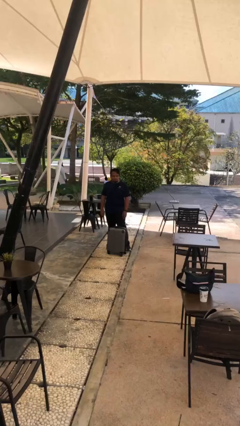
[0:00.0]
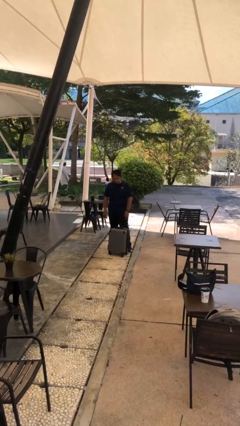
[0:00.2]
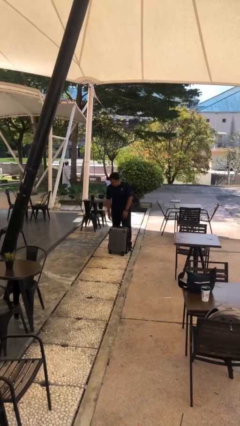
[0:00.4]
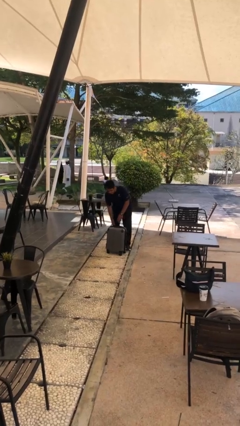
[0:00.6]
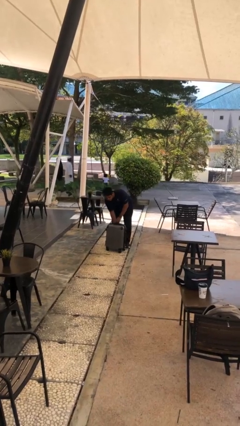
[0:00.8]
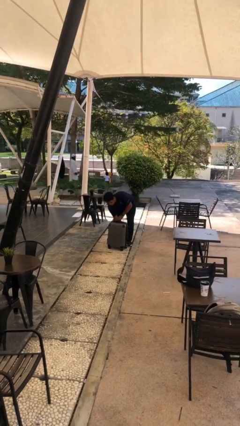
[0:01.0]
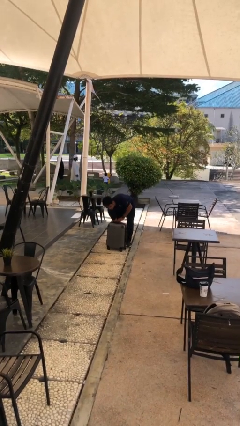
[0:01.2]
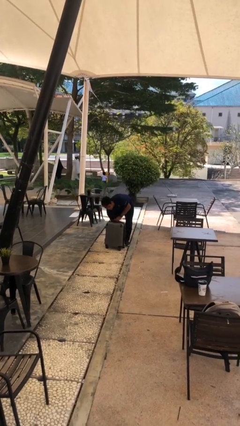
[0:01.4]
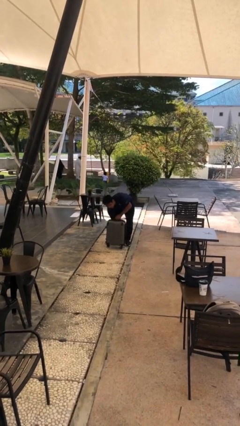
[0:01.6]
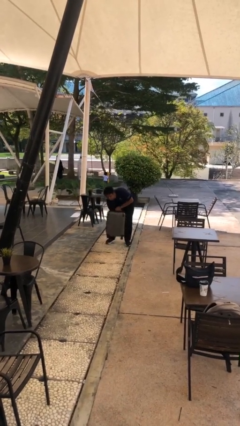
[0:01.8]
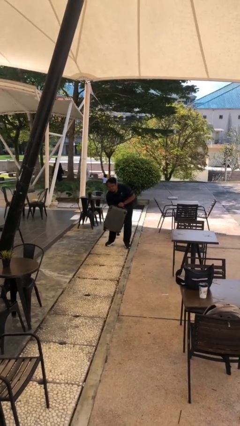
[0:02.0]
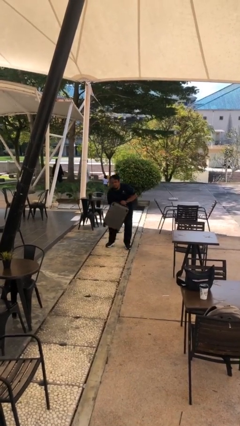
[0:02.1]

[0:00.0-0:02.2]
person picks up object from floor

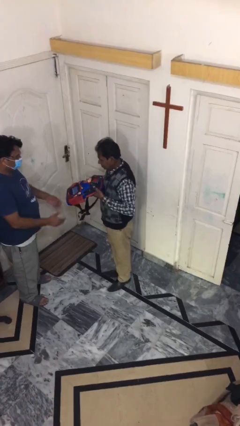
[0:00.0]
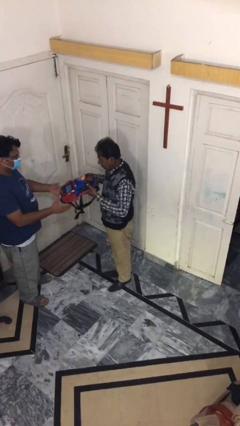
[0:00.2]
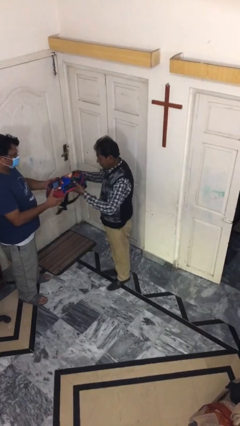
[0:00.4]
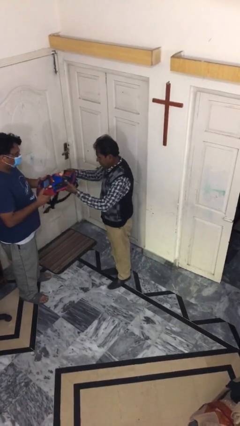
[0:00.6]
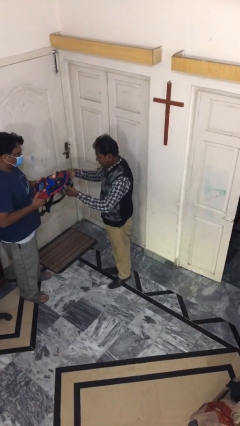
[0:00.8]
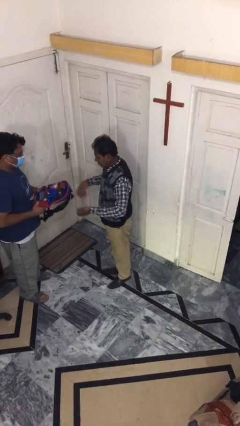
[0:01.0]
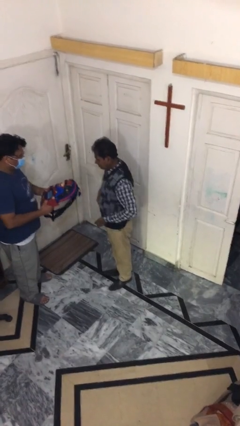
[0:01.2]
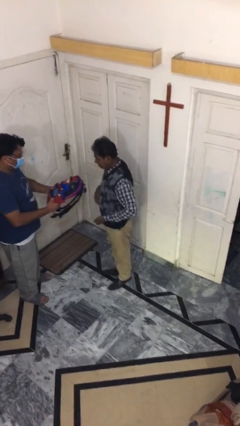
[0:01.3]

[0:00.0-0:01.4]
person transfers object to person

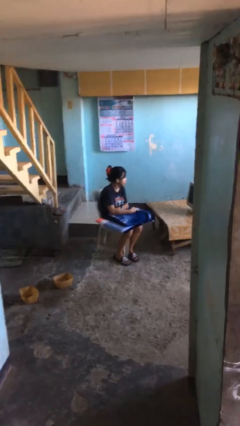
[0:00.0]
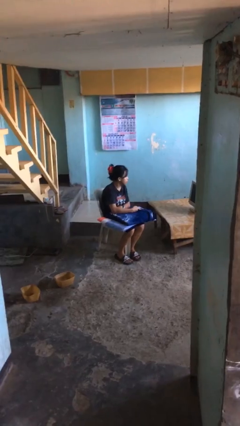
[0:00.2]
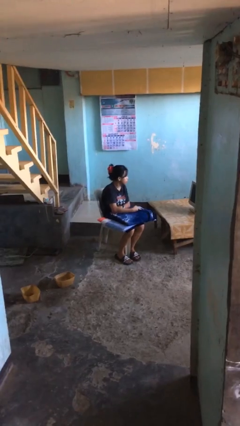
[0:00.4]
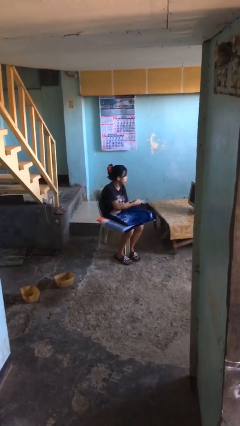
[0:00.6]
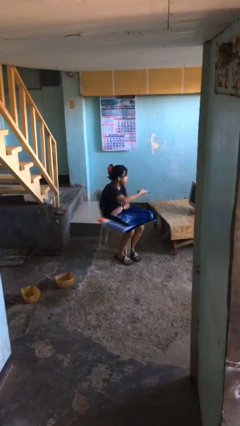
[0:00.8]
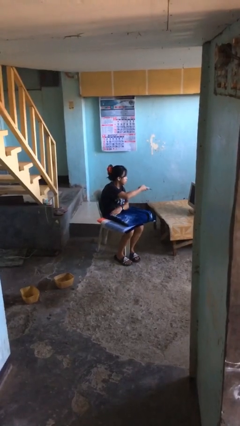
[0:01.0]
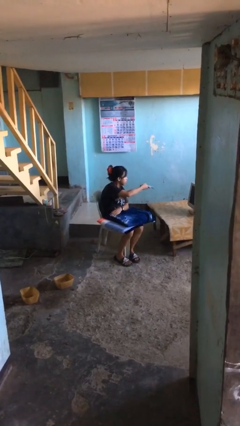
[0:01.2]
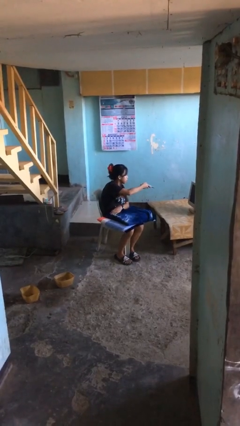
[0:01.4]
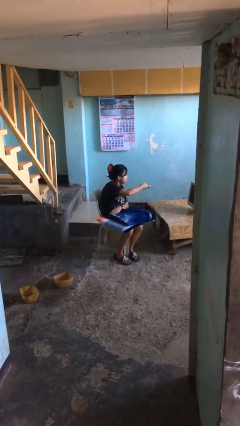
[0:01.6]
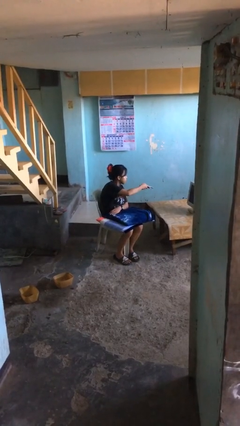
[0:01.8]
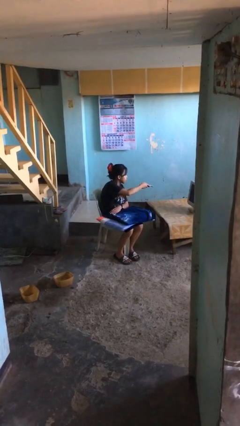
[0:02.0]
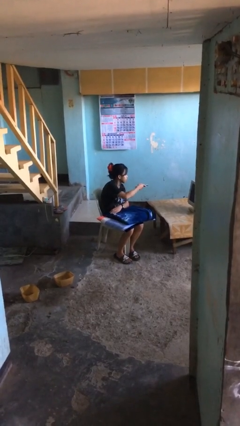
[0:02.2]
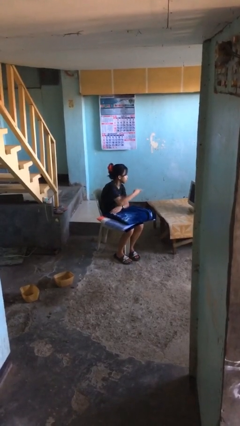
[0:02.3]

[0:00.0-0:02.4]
person uses television remote

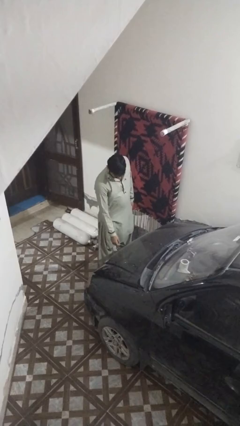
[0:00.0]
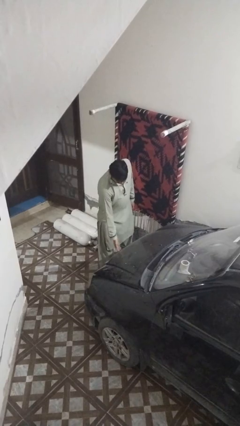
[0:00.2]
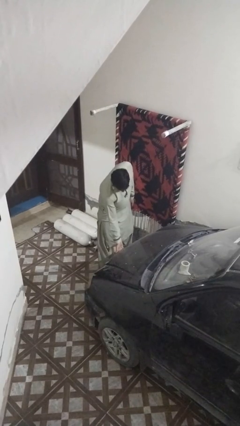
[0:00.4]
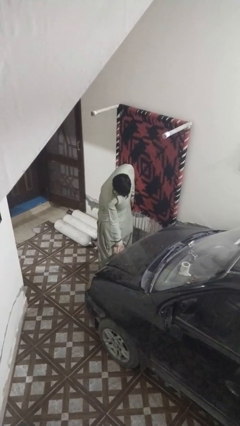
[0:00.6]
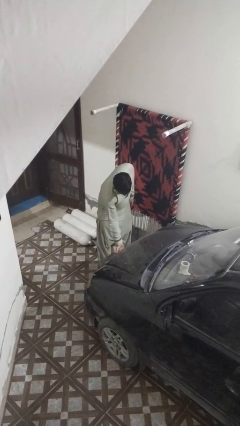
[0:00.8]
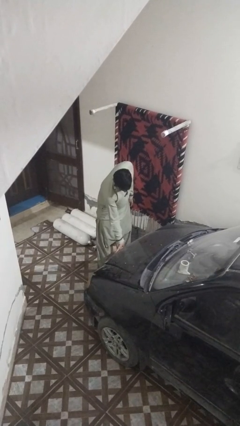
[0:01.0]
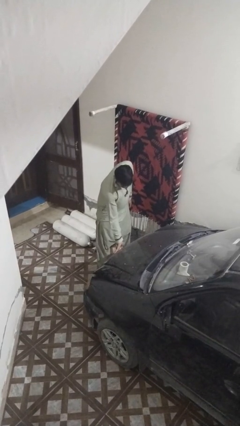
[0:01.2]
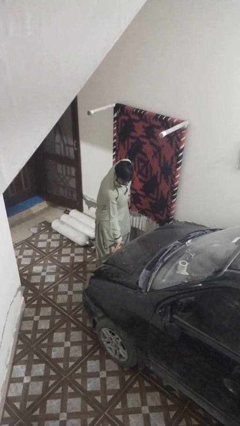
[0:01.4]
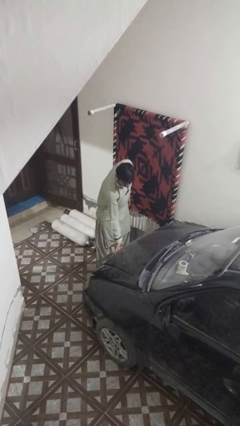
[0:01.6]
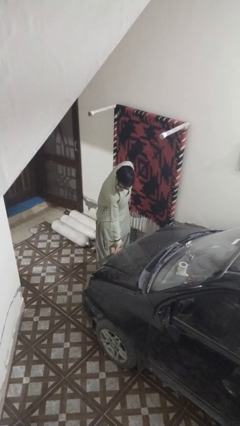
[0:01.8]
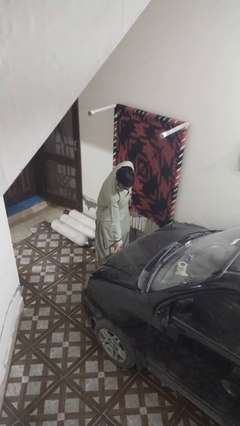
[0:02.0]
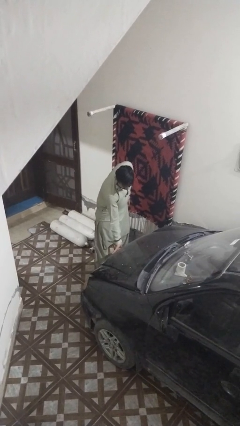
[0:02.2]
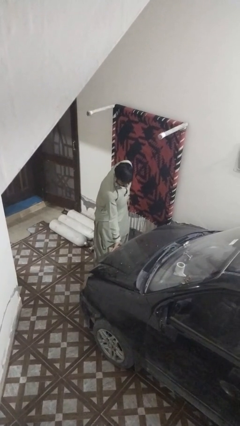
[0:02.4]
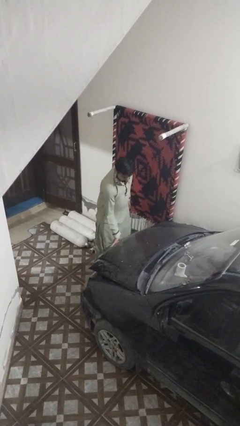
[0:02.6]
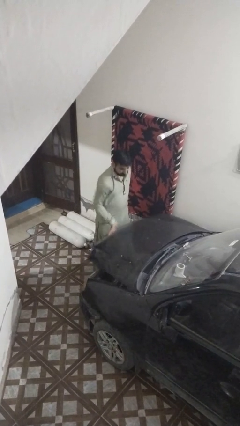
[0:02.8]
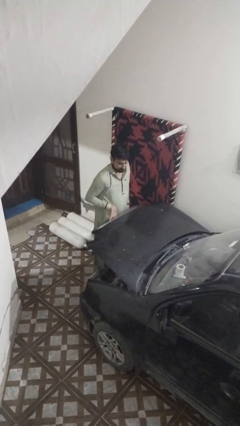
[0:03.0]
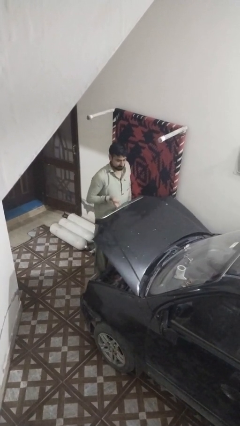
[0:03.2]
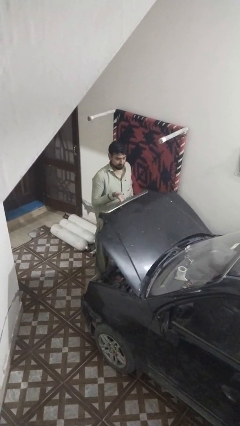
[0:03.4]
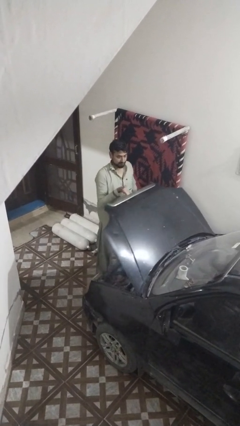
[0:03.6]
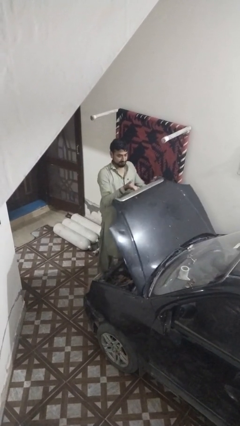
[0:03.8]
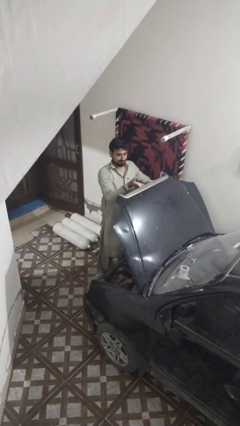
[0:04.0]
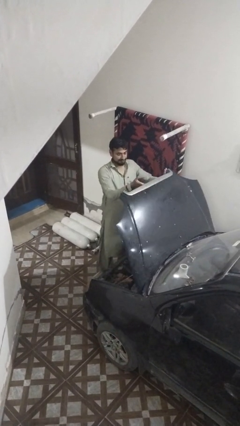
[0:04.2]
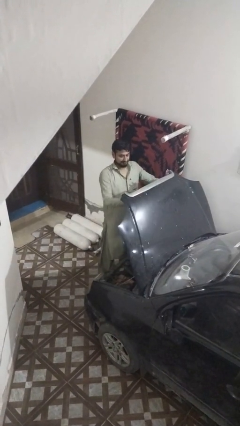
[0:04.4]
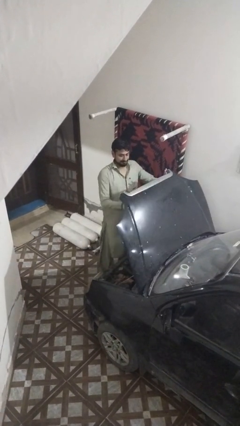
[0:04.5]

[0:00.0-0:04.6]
person opens car hood

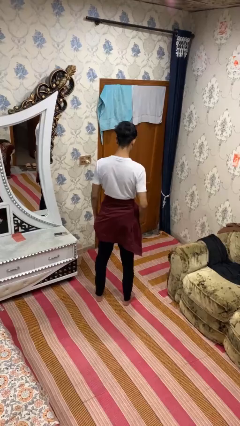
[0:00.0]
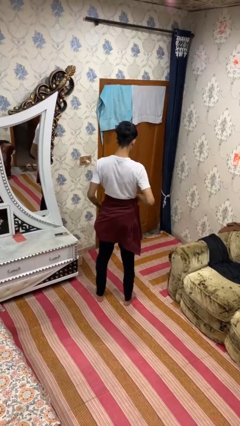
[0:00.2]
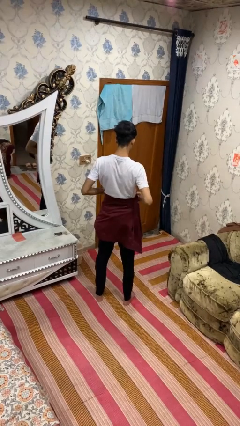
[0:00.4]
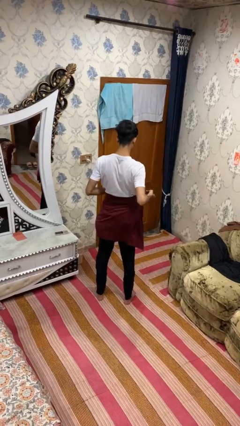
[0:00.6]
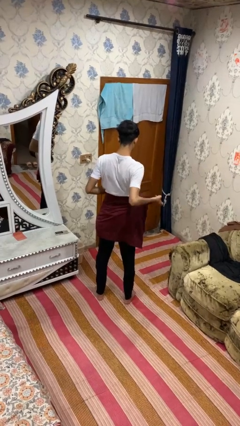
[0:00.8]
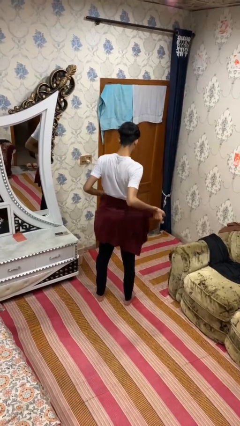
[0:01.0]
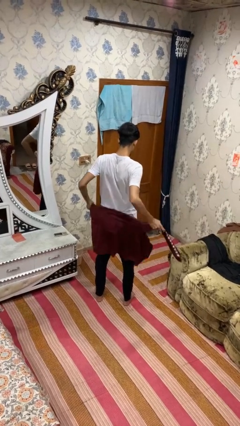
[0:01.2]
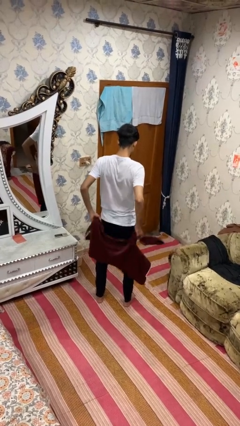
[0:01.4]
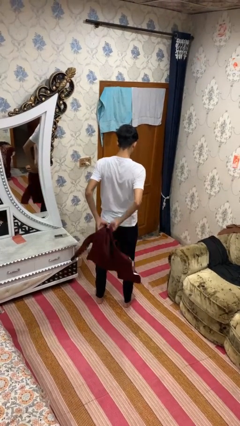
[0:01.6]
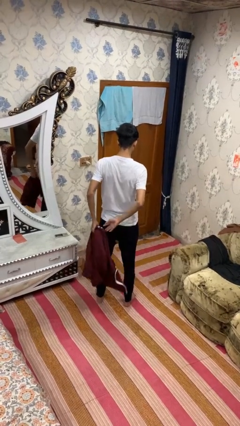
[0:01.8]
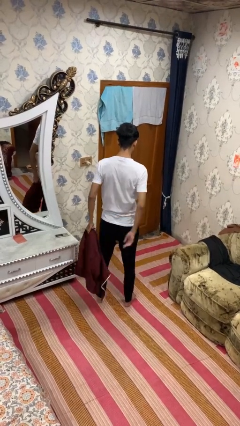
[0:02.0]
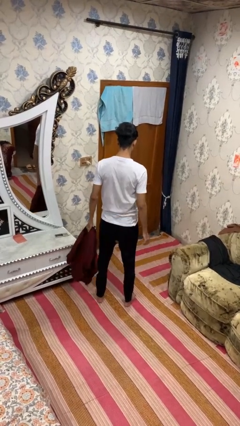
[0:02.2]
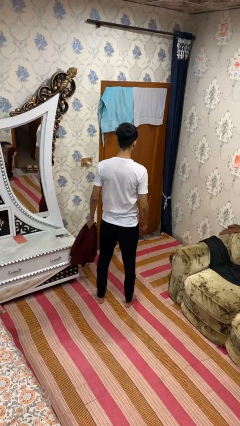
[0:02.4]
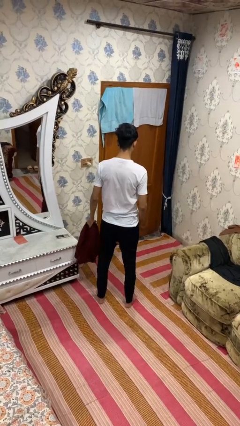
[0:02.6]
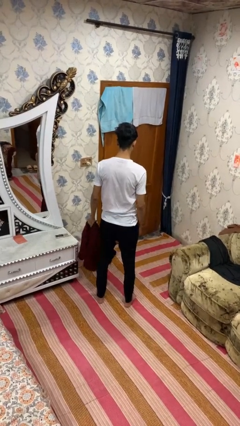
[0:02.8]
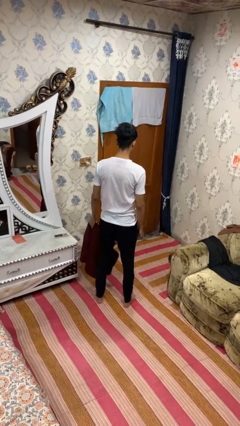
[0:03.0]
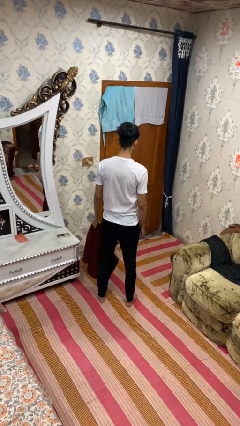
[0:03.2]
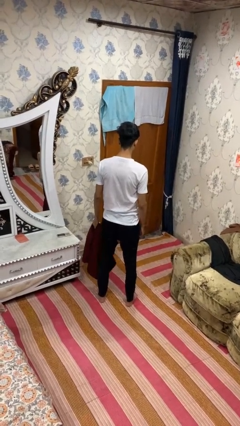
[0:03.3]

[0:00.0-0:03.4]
person unties jacket around waist

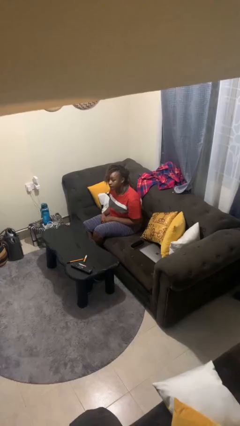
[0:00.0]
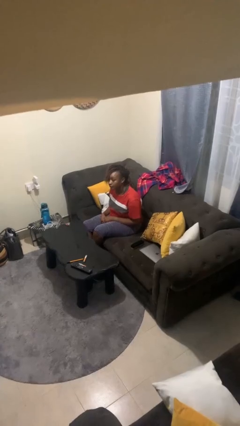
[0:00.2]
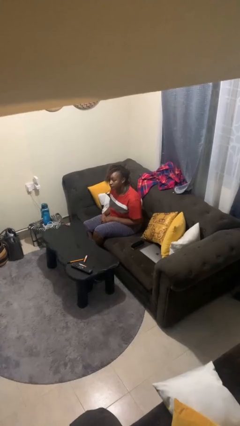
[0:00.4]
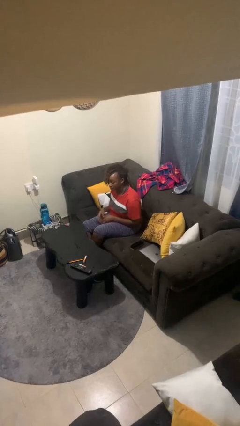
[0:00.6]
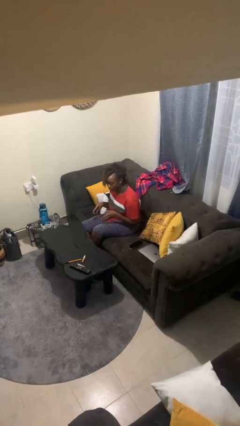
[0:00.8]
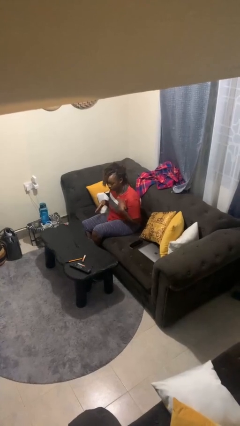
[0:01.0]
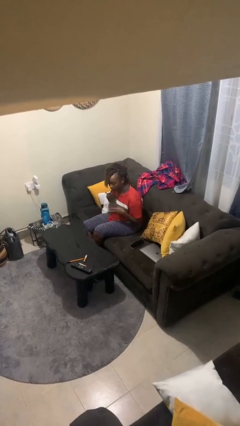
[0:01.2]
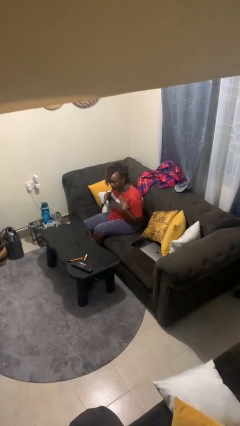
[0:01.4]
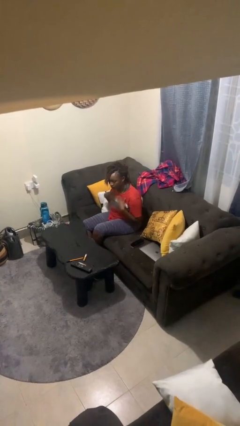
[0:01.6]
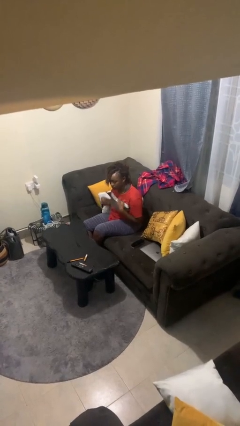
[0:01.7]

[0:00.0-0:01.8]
person drums on chest

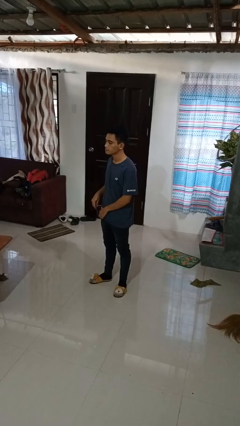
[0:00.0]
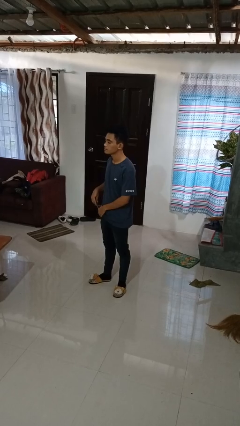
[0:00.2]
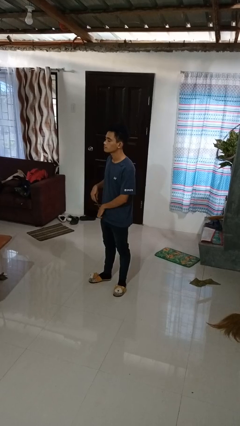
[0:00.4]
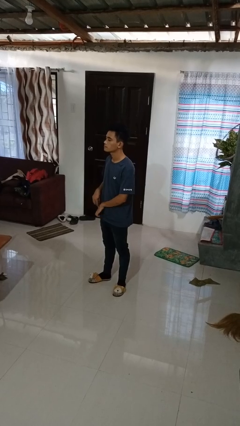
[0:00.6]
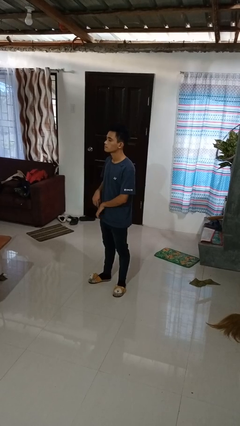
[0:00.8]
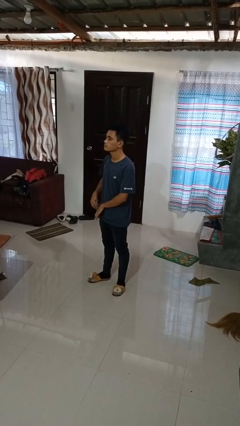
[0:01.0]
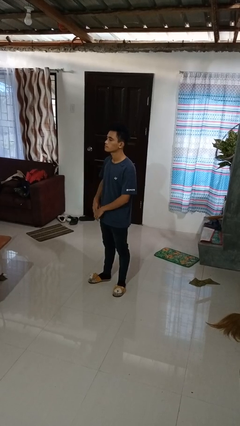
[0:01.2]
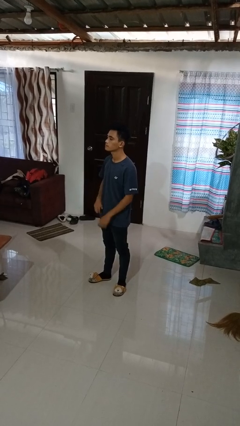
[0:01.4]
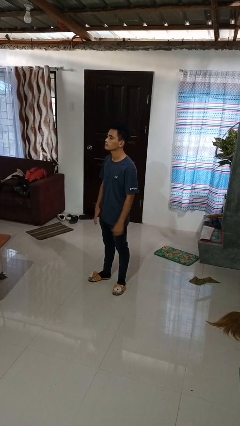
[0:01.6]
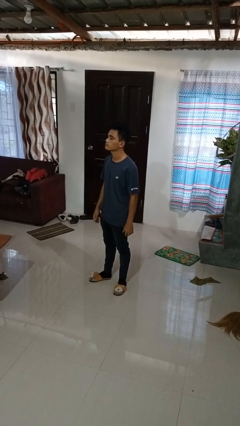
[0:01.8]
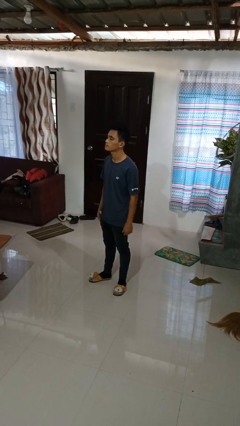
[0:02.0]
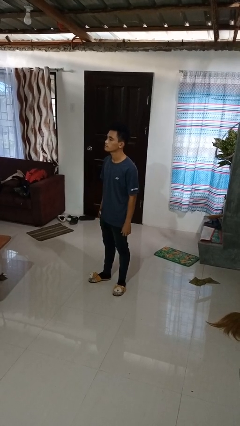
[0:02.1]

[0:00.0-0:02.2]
person puts phone into pocket
